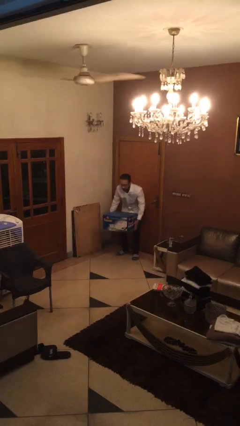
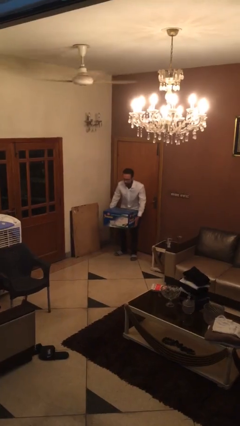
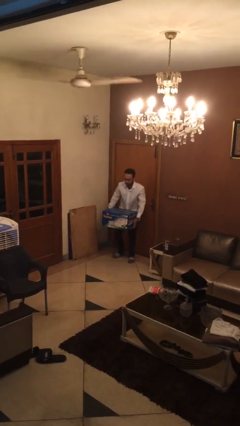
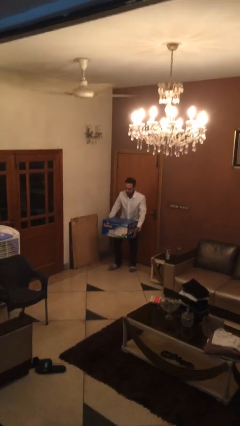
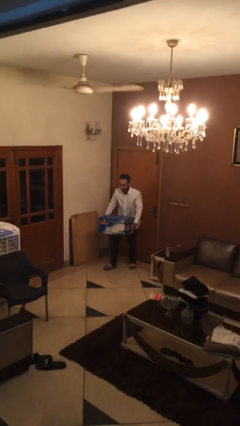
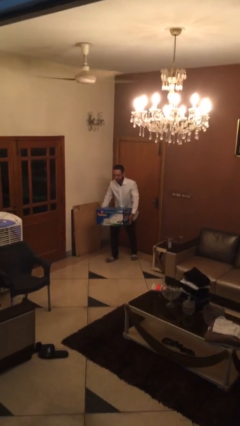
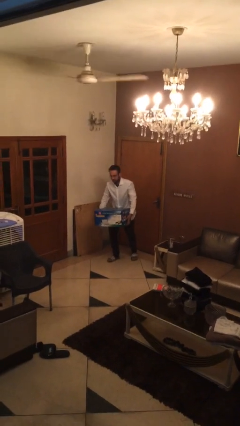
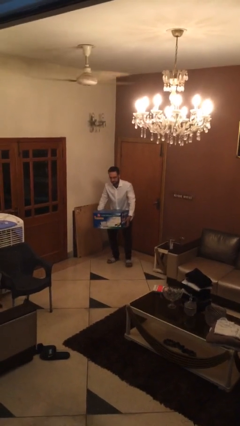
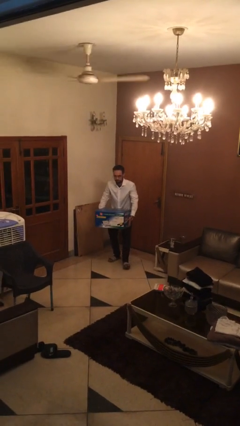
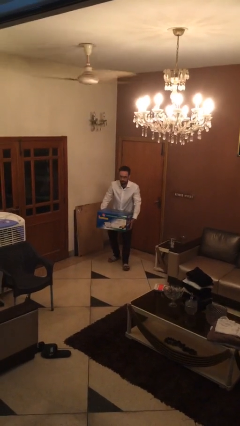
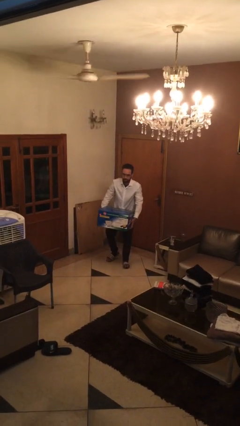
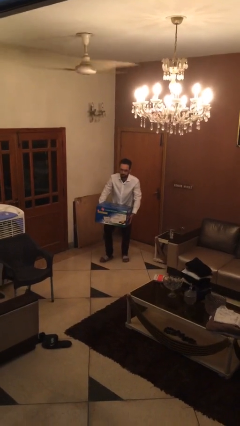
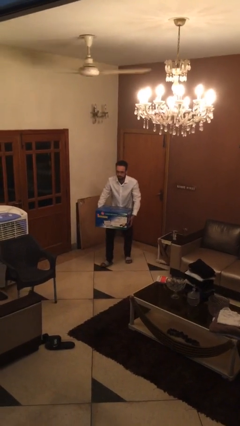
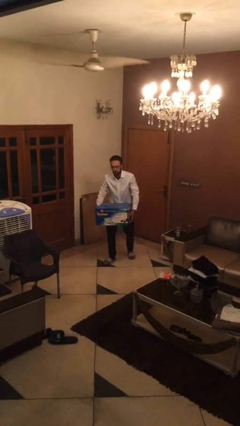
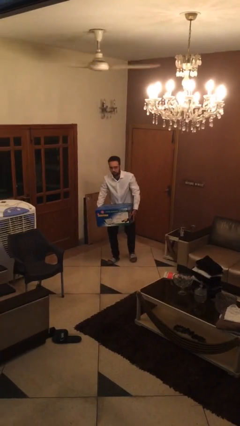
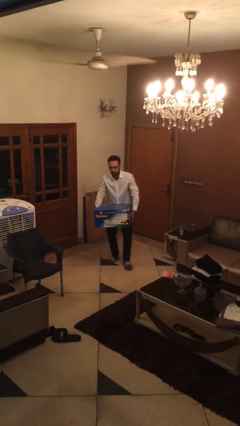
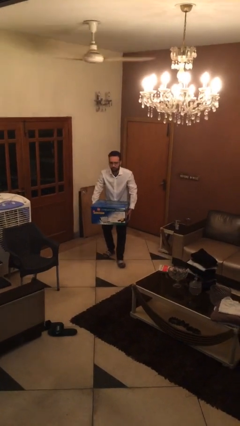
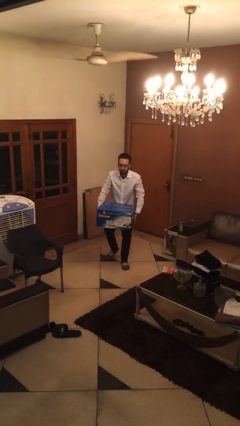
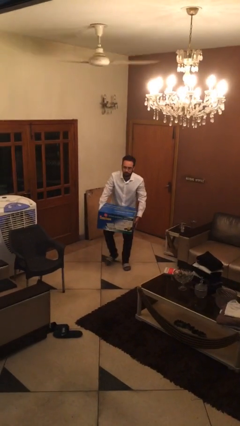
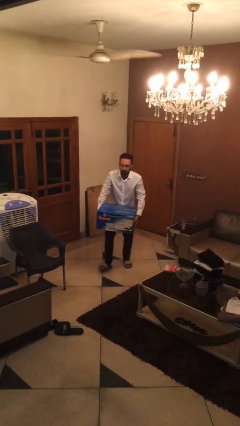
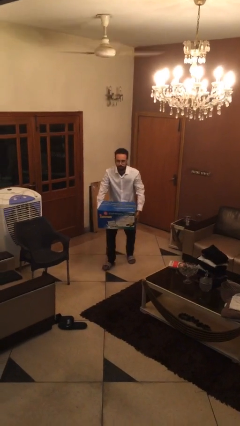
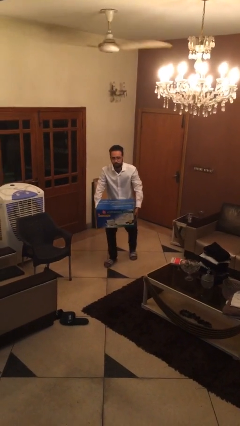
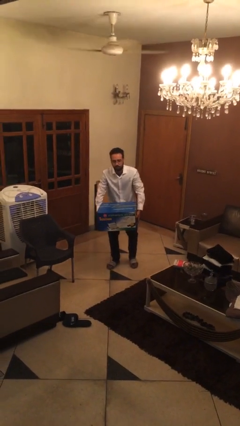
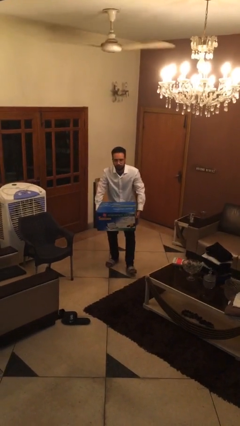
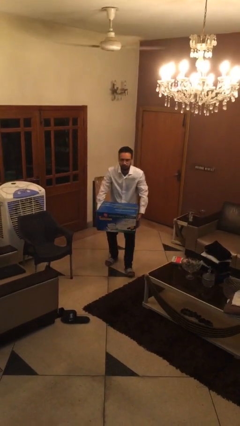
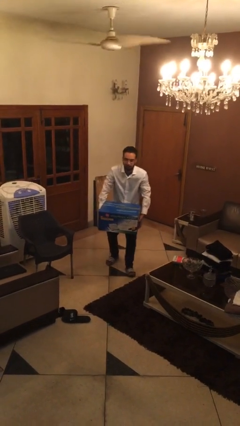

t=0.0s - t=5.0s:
person carries heavy object

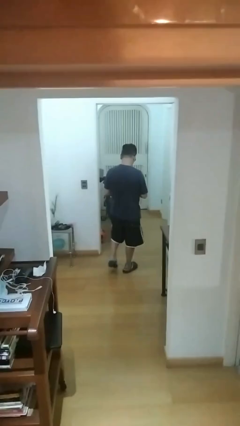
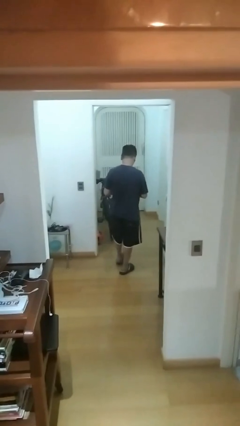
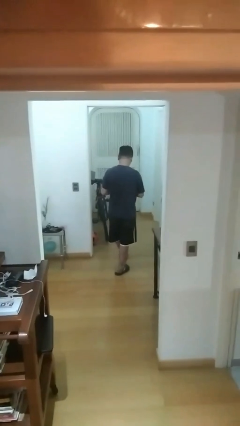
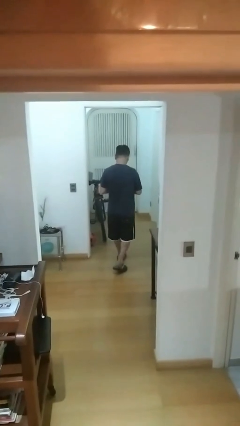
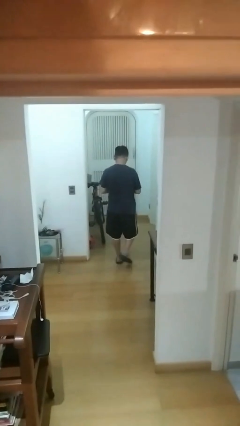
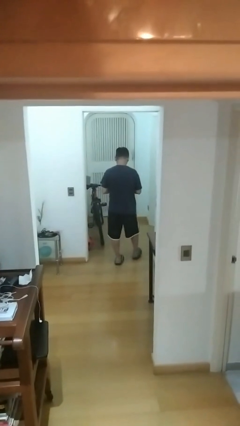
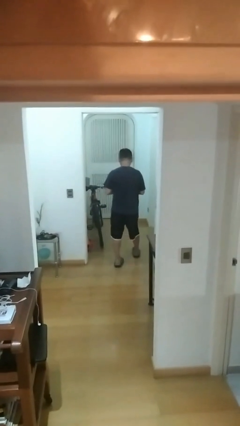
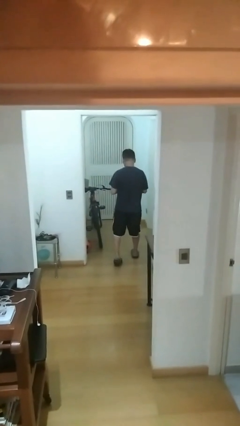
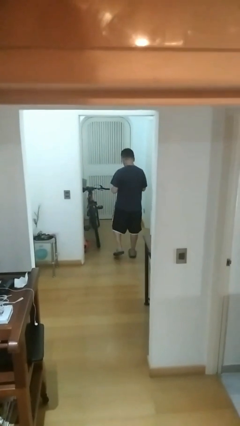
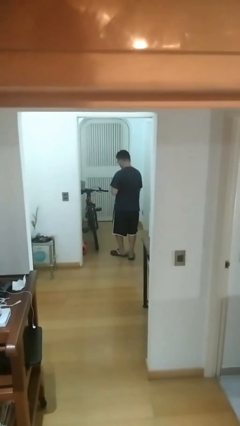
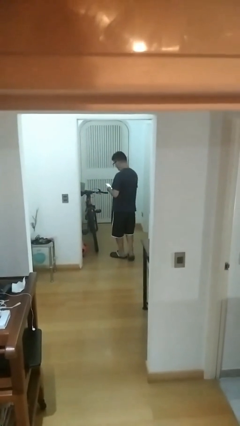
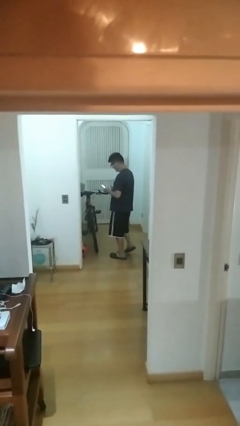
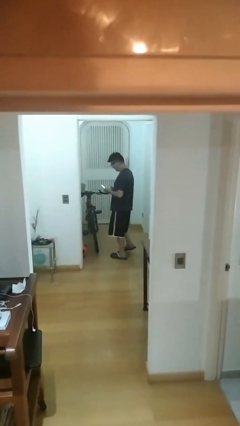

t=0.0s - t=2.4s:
person exits scene through structure

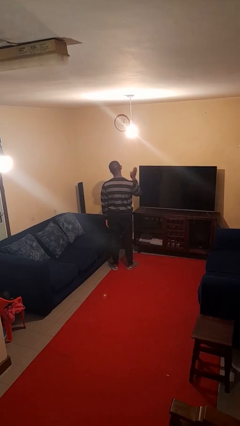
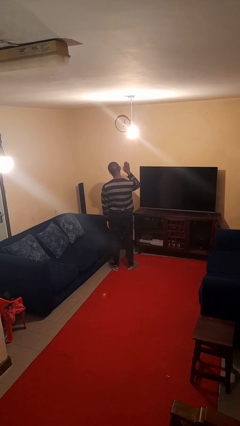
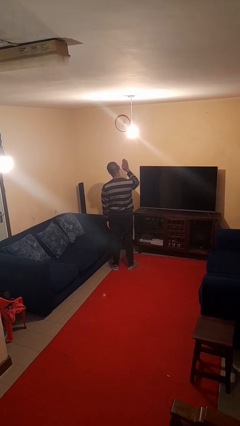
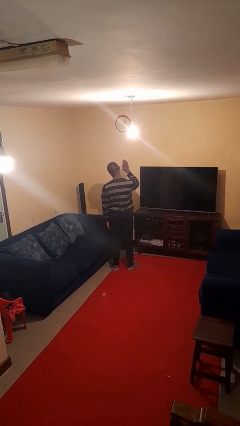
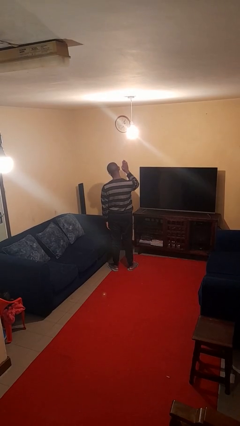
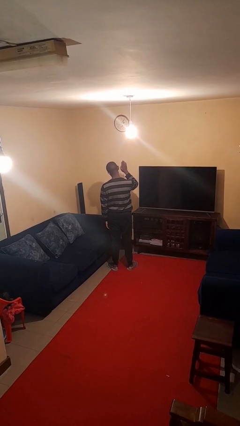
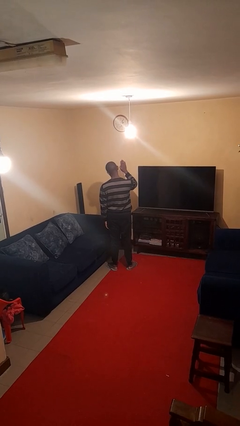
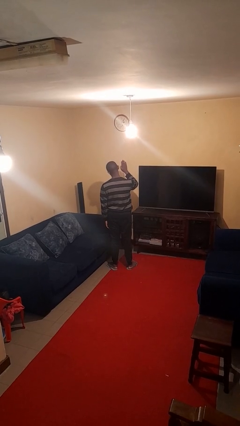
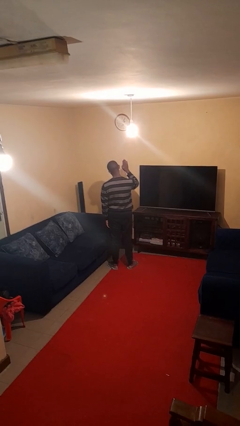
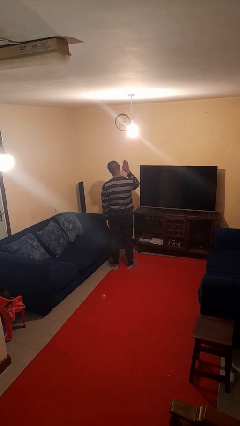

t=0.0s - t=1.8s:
person gestures stop

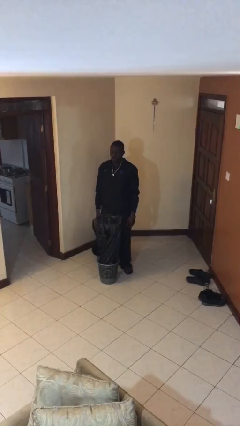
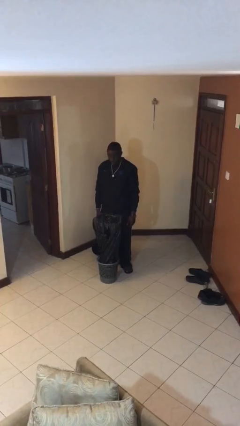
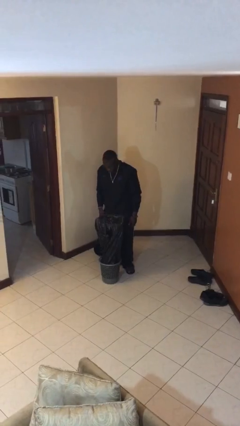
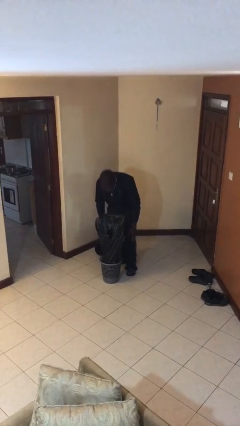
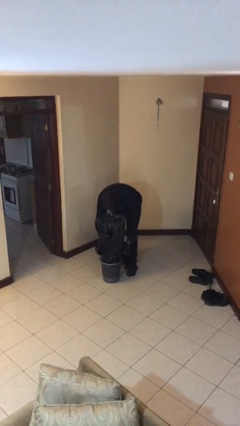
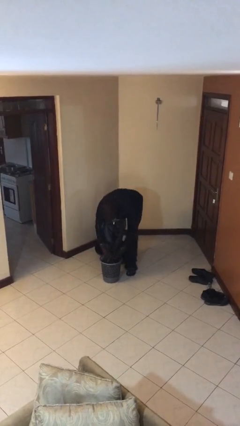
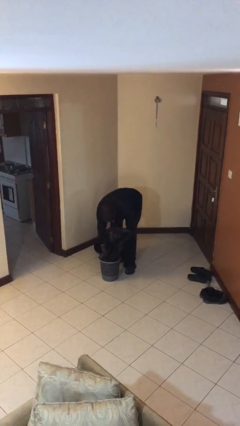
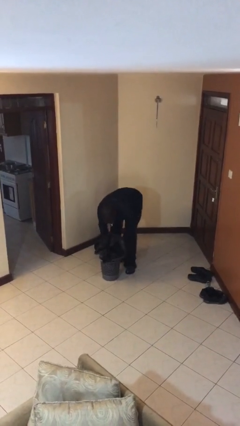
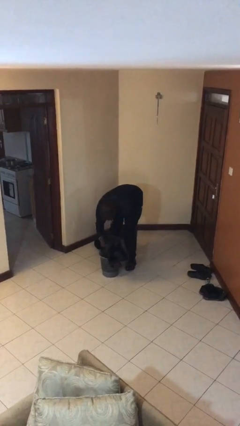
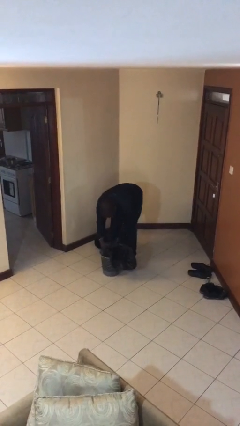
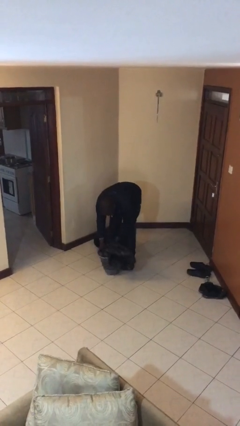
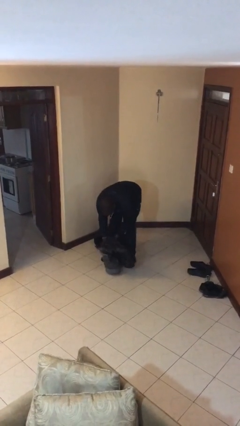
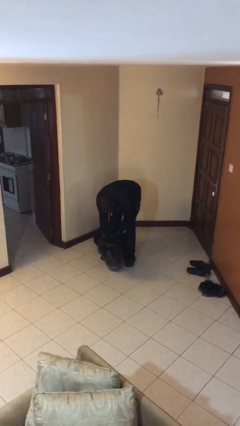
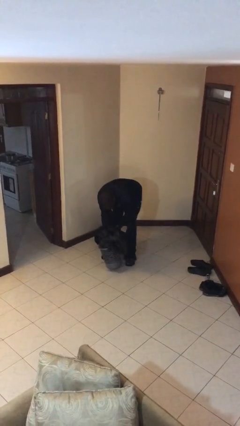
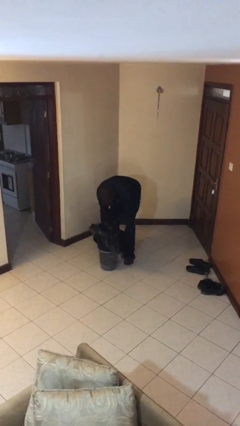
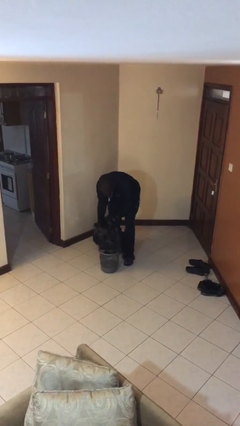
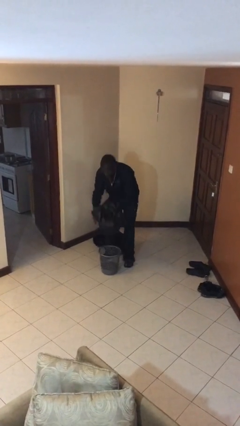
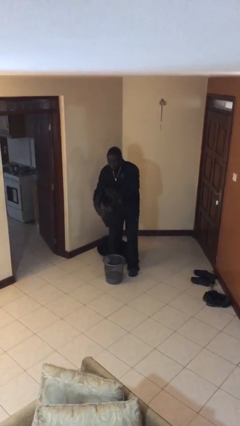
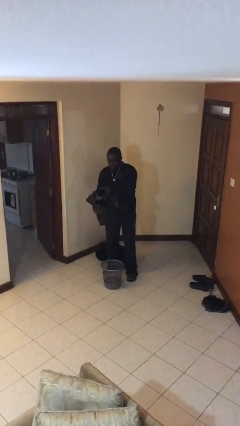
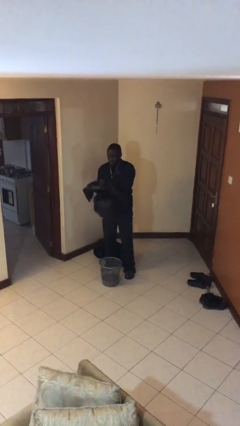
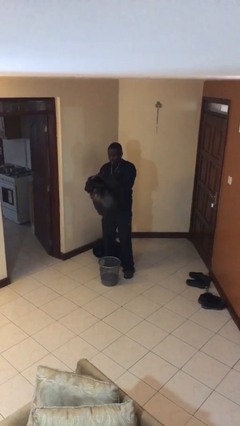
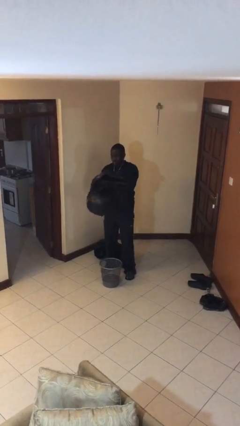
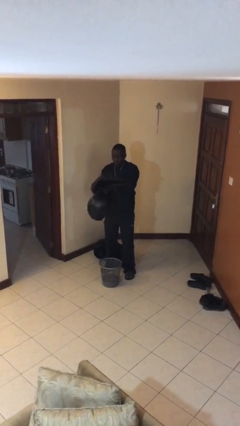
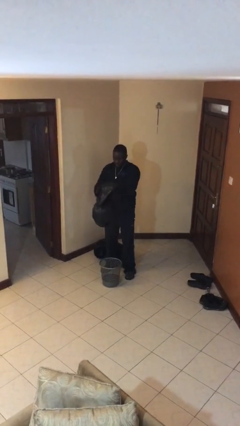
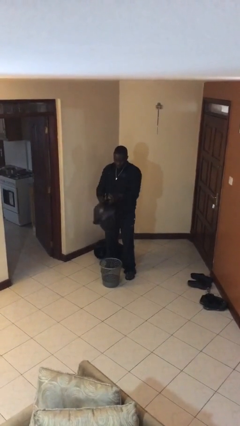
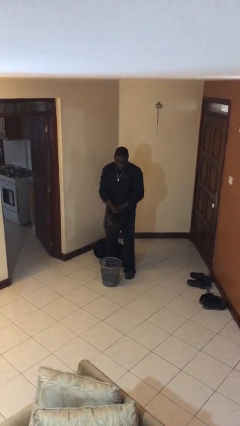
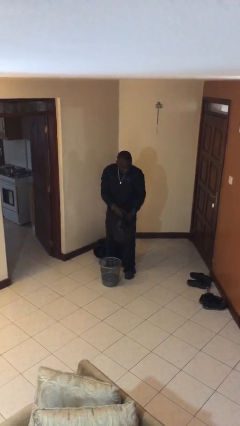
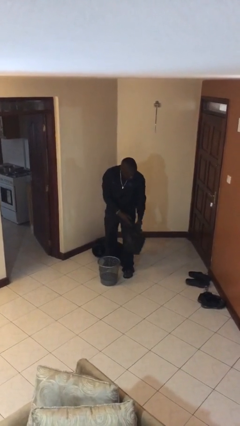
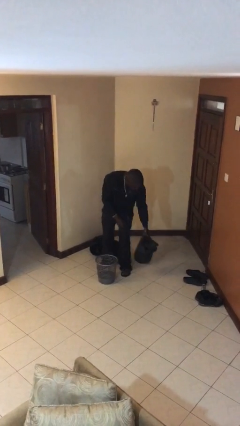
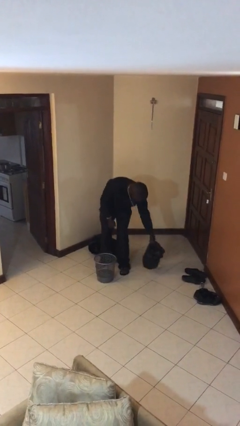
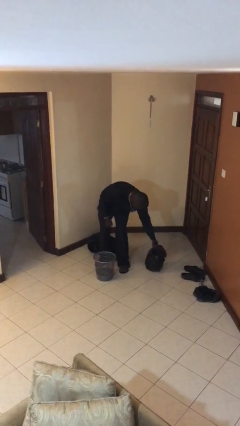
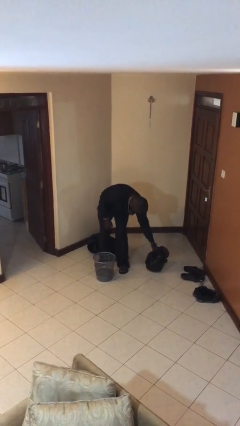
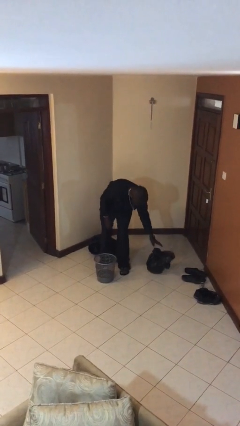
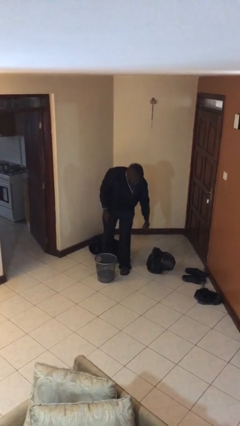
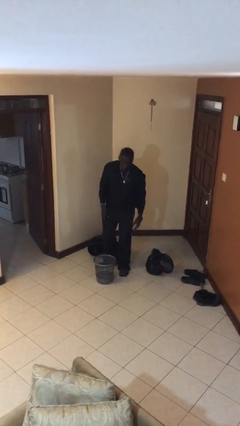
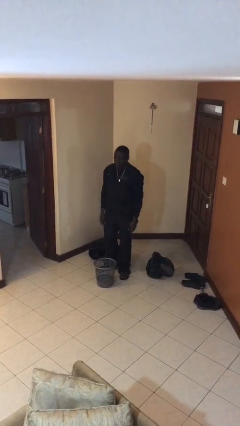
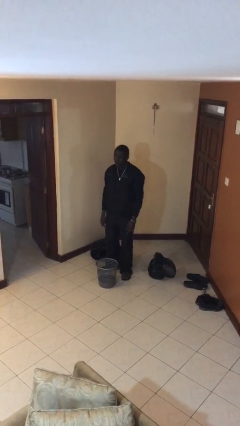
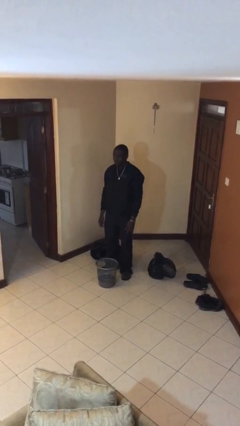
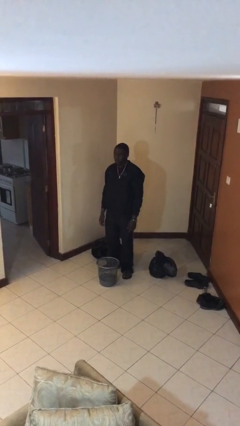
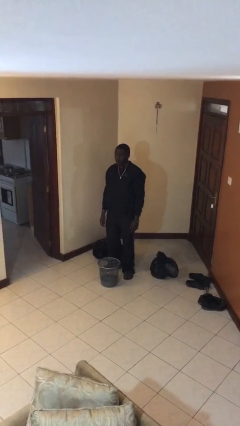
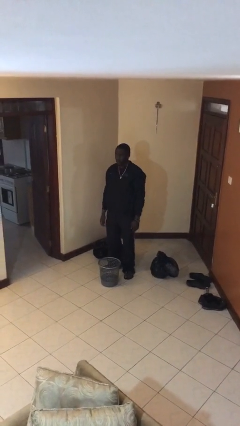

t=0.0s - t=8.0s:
person removes trashbag from trashcan

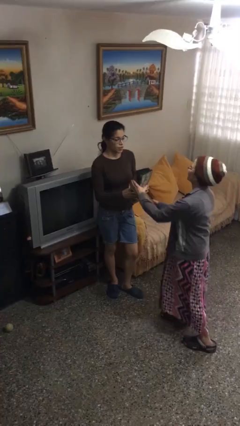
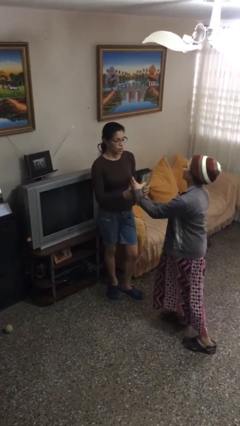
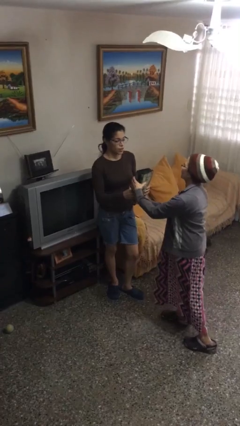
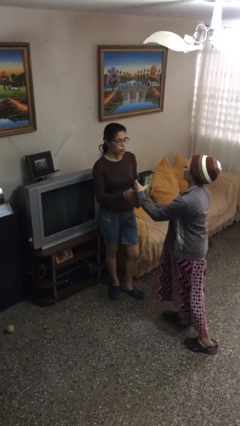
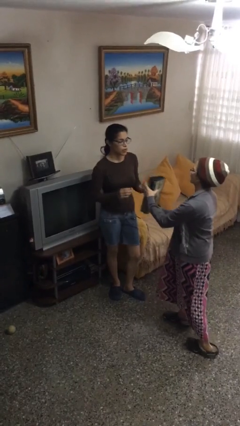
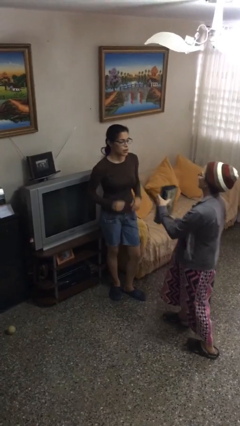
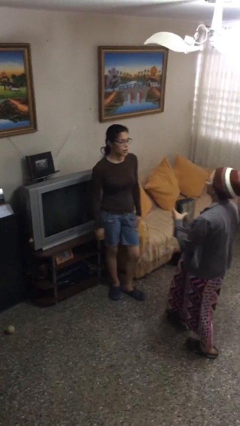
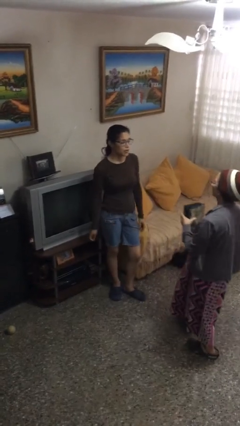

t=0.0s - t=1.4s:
person transfers object to person
